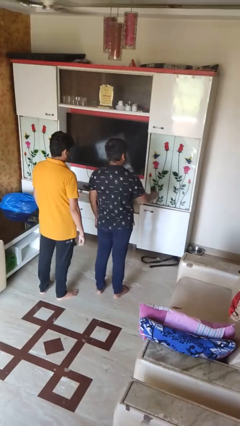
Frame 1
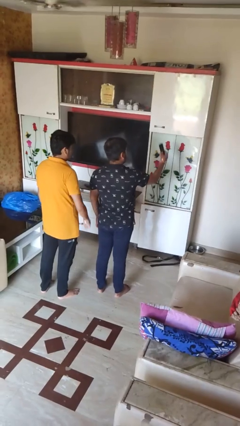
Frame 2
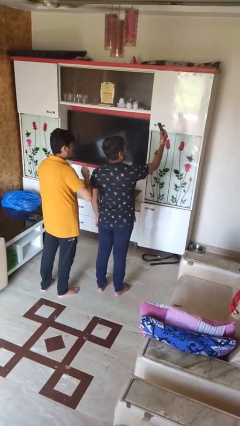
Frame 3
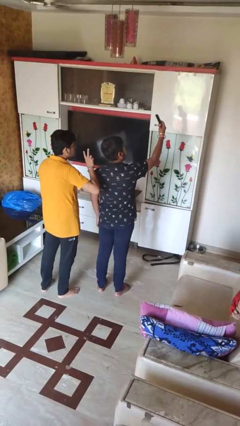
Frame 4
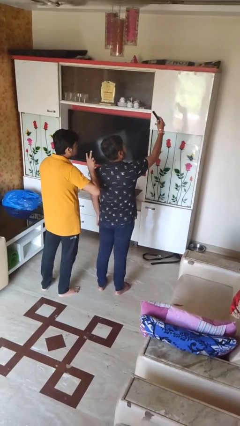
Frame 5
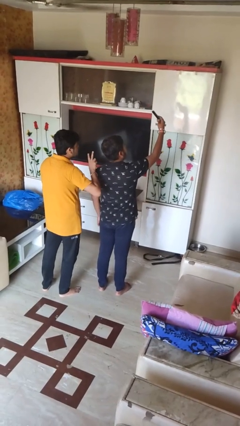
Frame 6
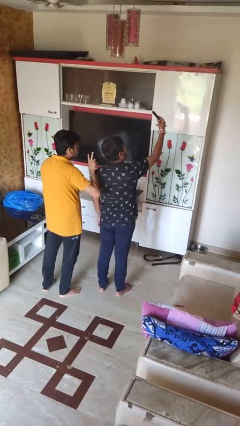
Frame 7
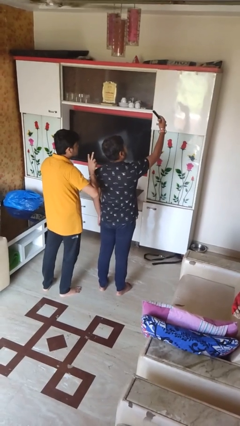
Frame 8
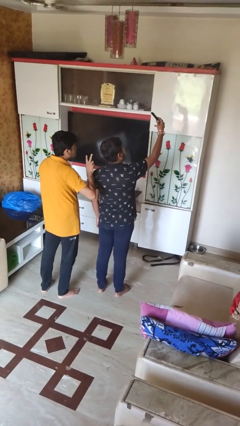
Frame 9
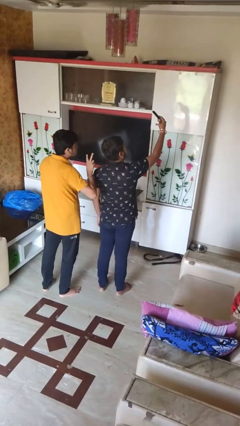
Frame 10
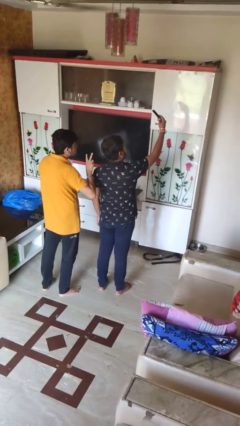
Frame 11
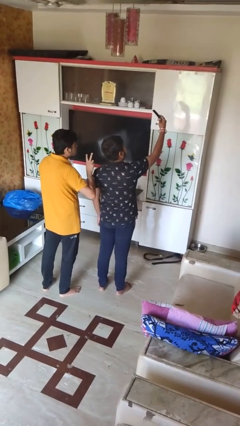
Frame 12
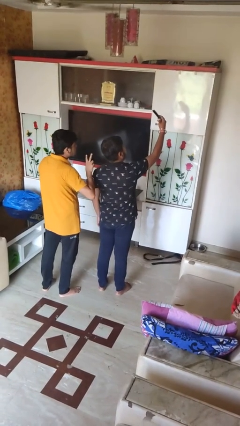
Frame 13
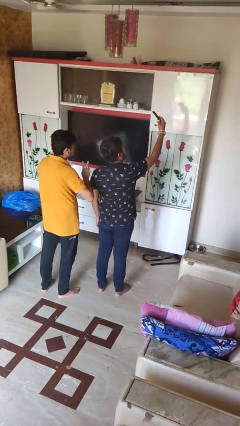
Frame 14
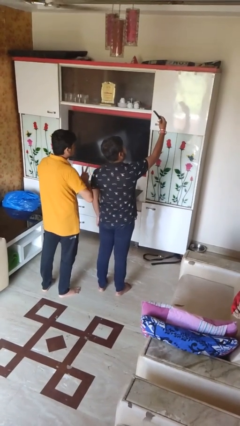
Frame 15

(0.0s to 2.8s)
person takes selfie with person

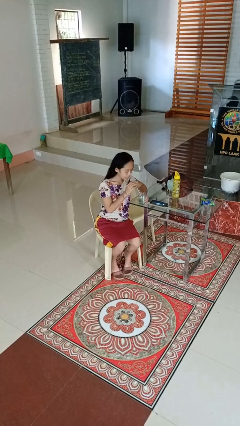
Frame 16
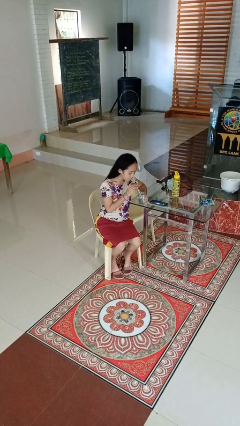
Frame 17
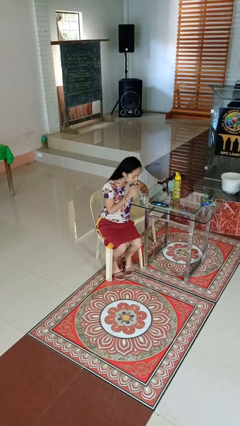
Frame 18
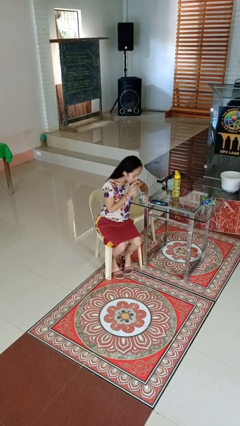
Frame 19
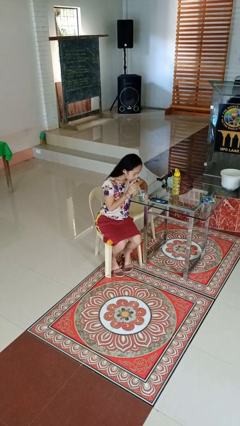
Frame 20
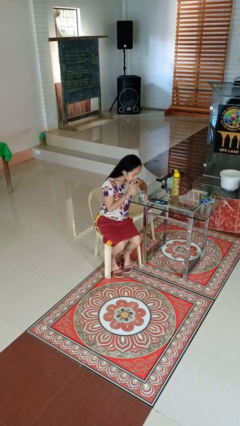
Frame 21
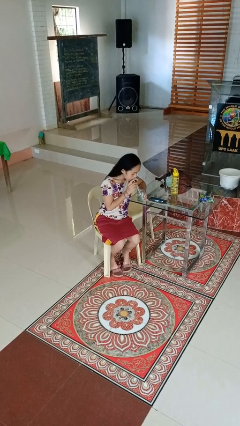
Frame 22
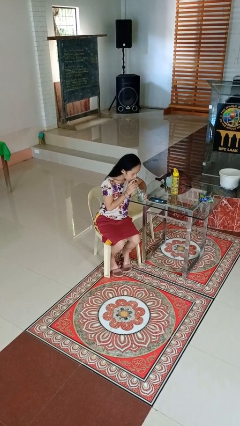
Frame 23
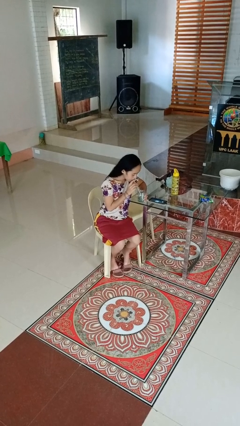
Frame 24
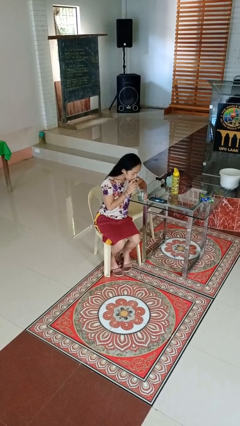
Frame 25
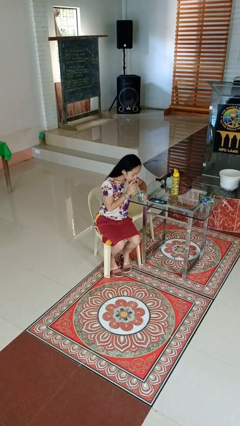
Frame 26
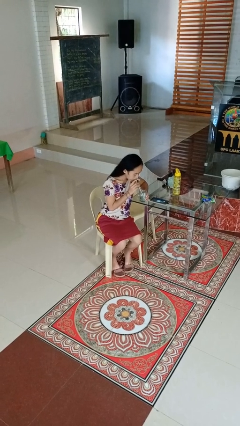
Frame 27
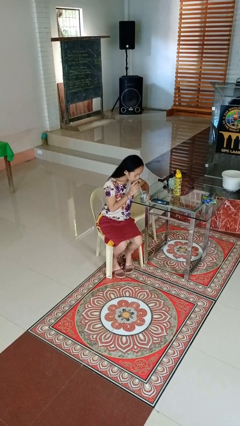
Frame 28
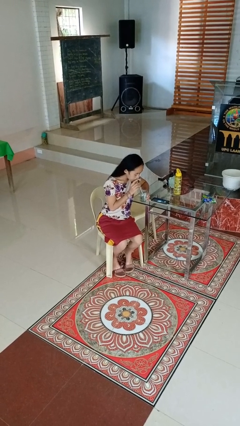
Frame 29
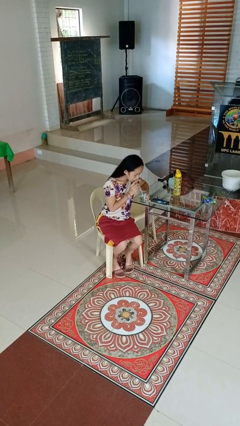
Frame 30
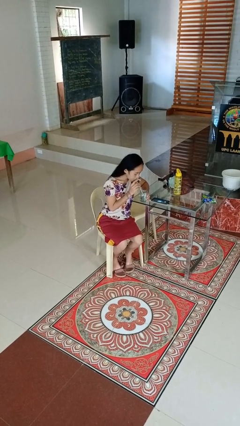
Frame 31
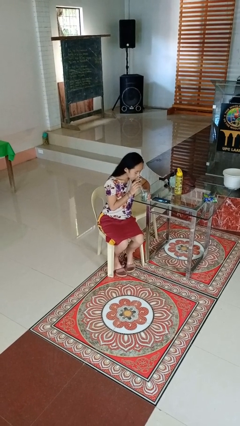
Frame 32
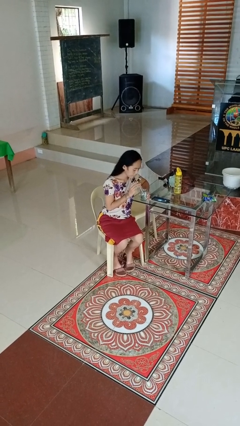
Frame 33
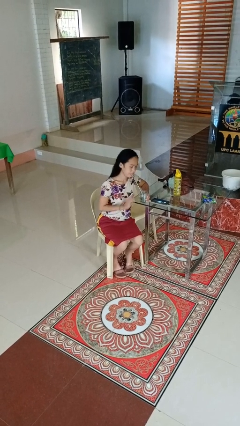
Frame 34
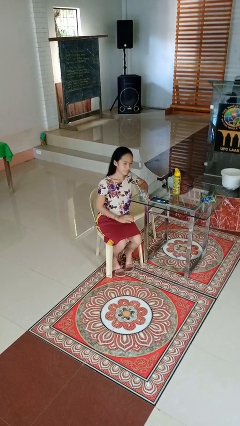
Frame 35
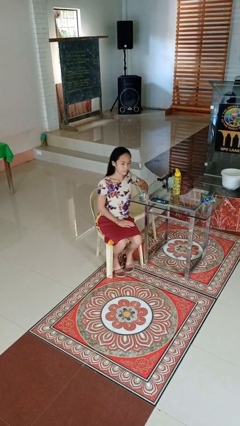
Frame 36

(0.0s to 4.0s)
person drinks from straw

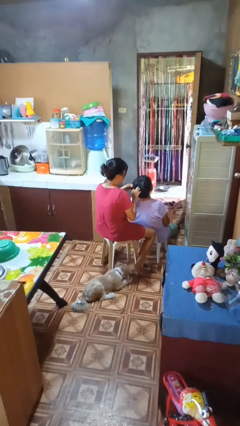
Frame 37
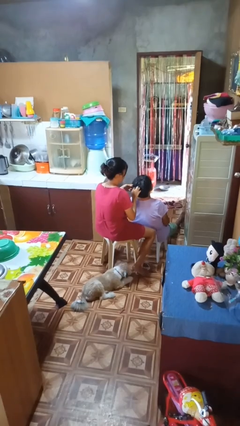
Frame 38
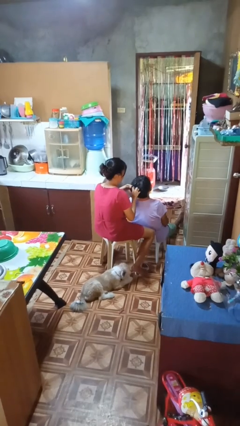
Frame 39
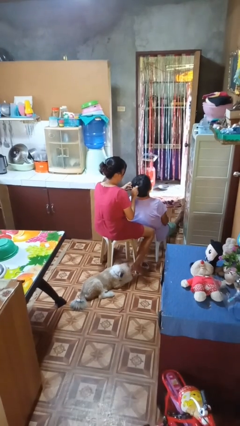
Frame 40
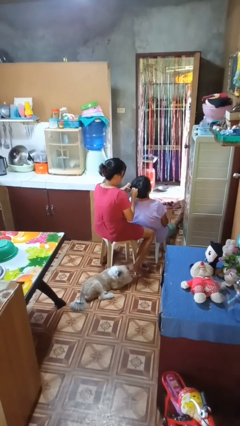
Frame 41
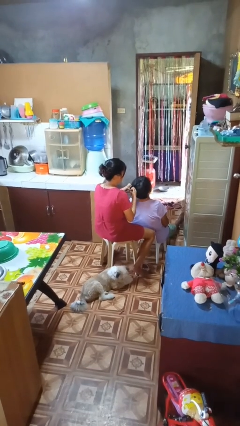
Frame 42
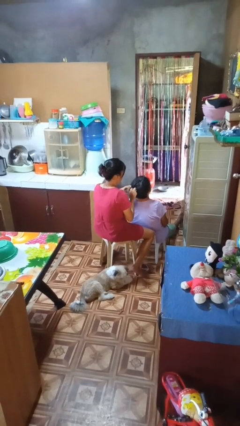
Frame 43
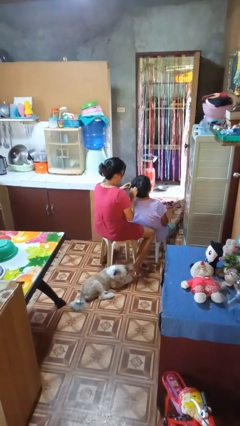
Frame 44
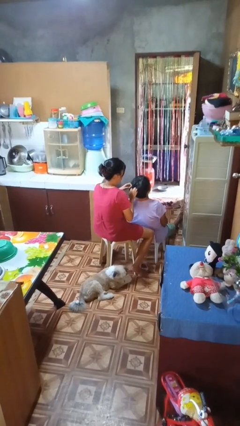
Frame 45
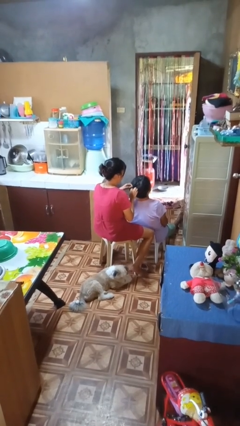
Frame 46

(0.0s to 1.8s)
person braids hair of person

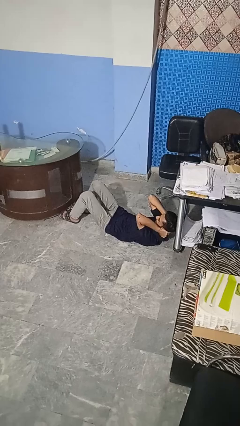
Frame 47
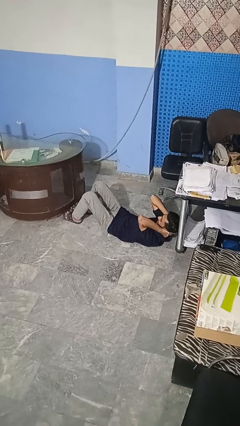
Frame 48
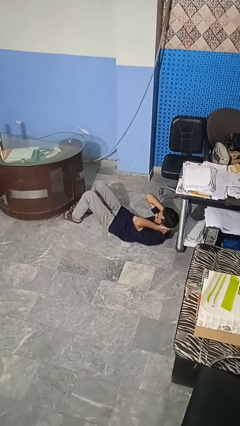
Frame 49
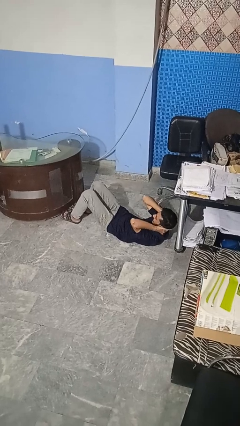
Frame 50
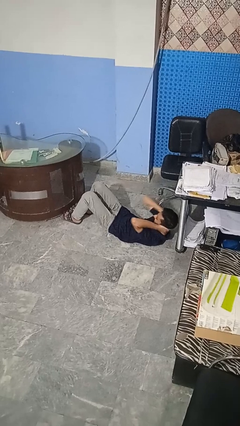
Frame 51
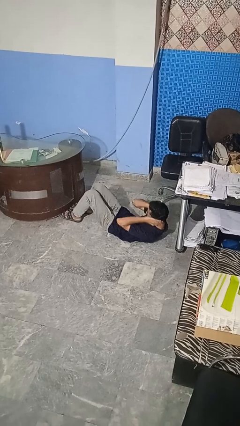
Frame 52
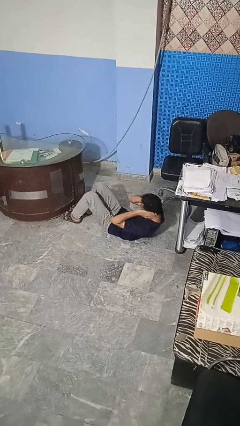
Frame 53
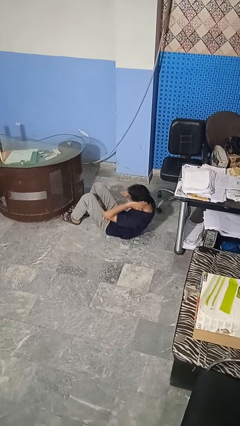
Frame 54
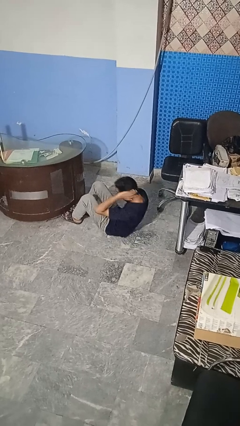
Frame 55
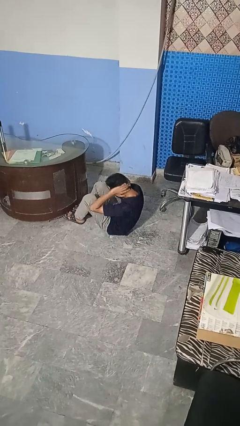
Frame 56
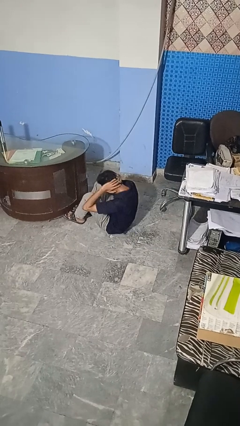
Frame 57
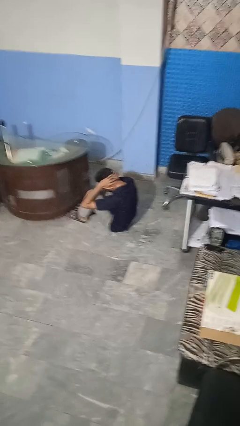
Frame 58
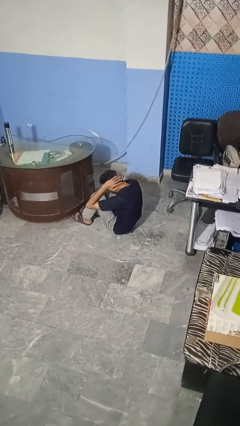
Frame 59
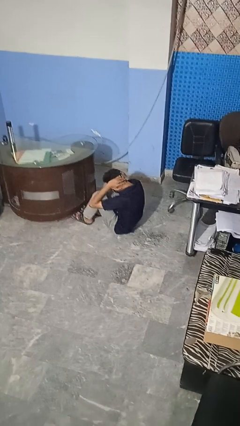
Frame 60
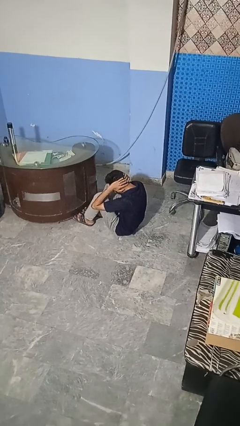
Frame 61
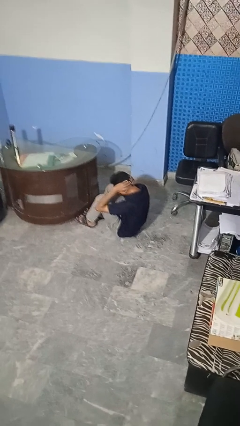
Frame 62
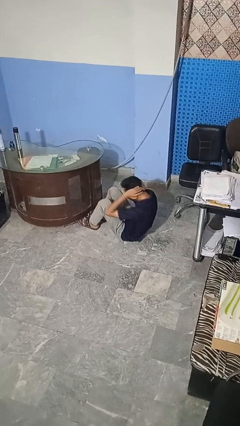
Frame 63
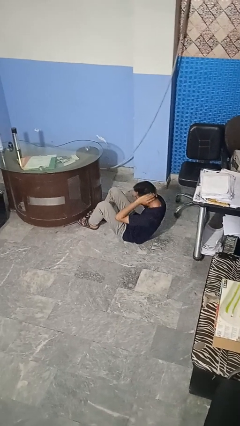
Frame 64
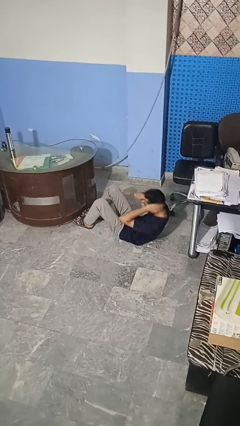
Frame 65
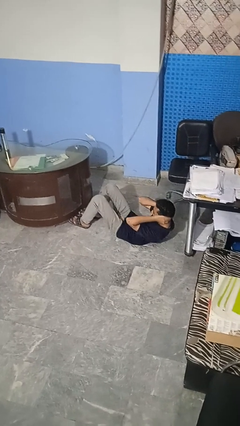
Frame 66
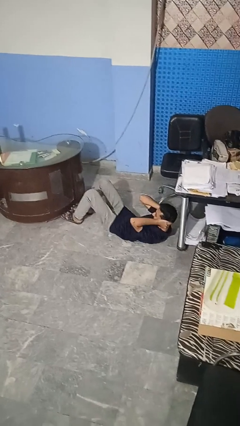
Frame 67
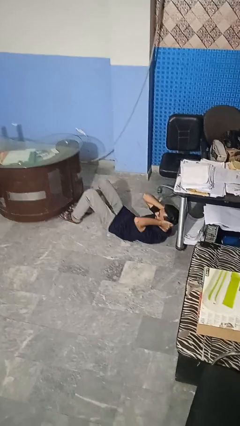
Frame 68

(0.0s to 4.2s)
person exercises with situp

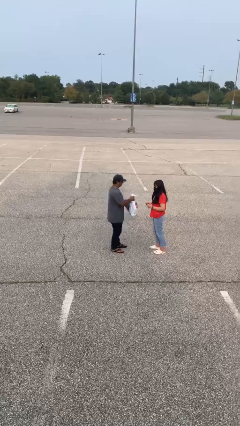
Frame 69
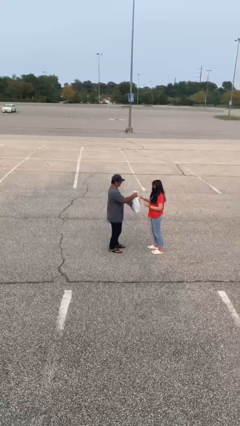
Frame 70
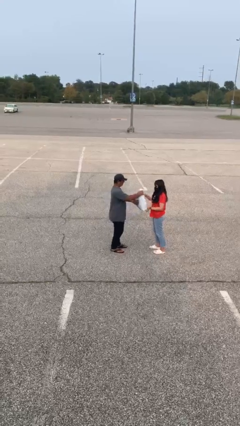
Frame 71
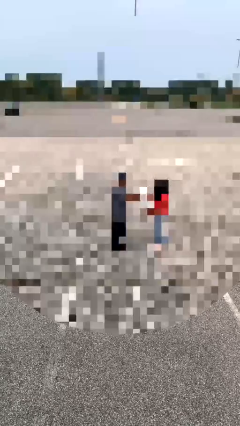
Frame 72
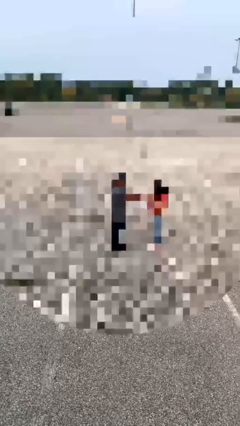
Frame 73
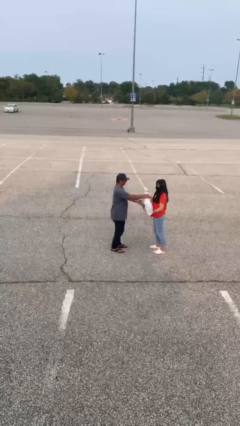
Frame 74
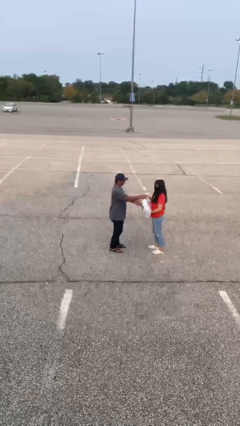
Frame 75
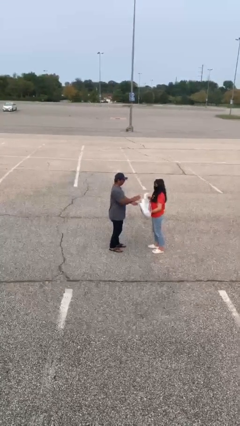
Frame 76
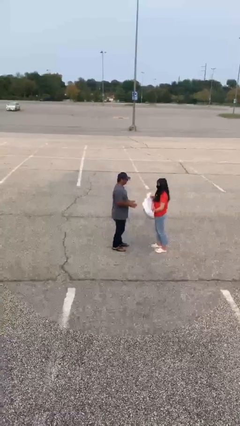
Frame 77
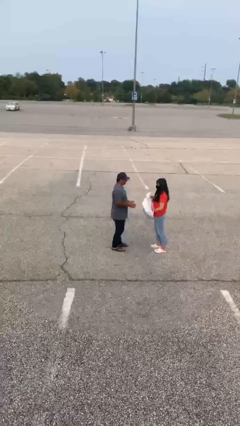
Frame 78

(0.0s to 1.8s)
person transfers object to person

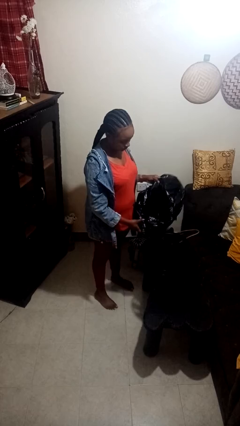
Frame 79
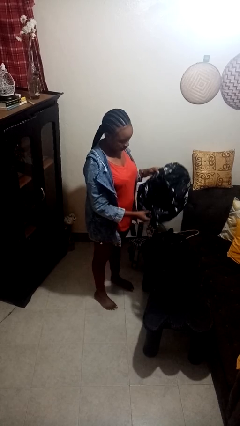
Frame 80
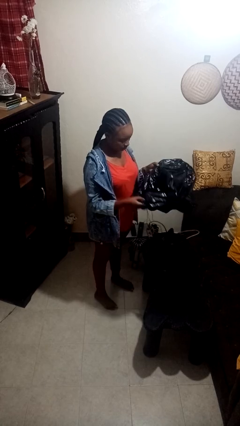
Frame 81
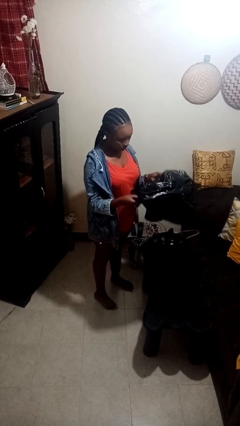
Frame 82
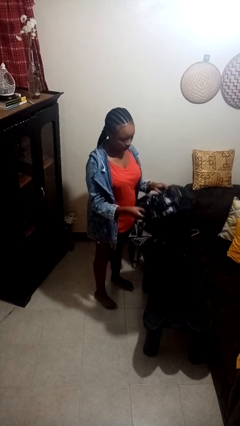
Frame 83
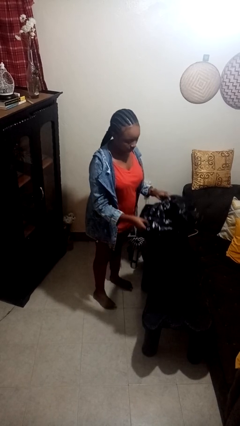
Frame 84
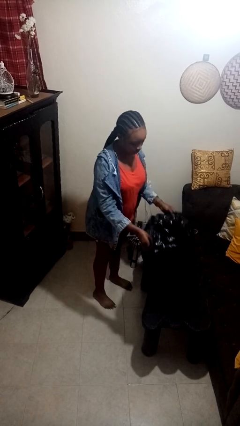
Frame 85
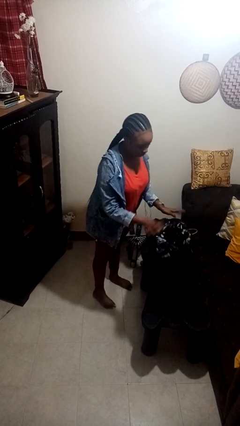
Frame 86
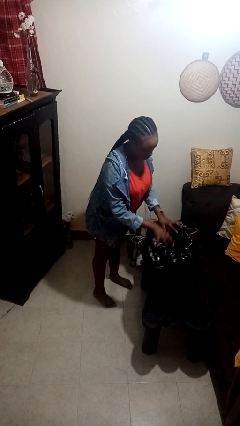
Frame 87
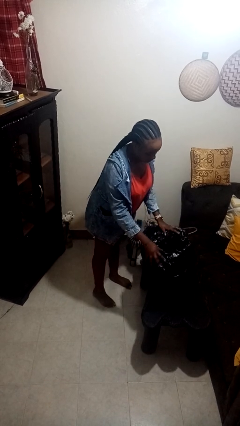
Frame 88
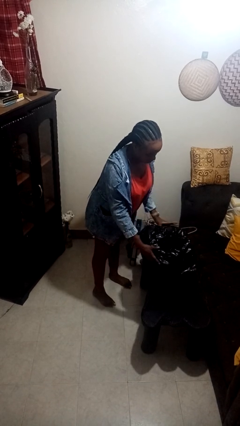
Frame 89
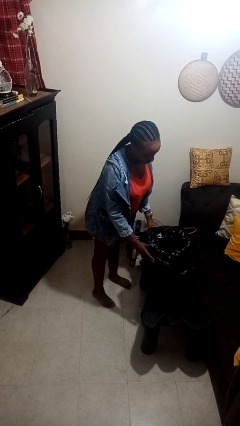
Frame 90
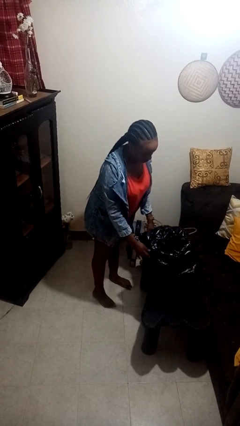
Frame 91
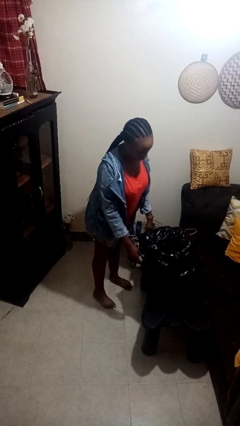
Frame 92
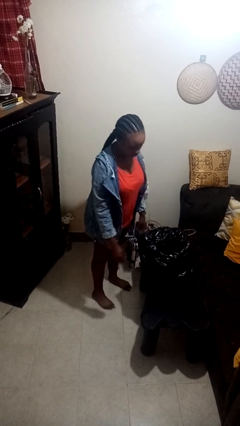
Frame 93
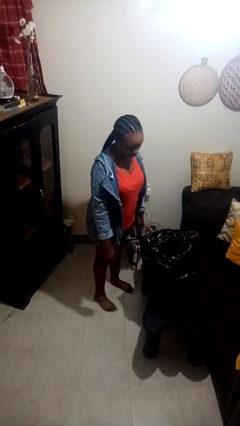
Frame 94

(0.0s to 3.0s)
person inserts trashbag into trashcan

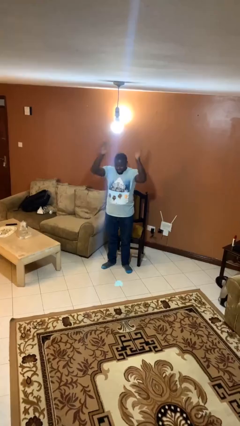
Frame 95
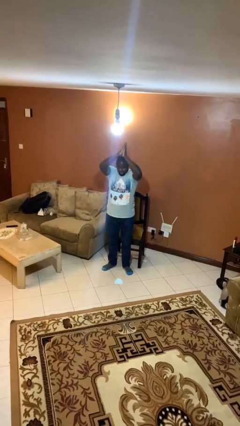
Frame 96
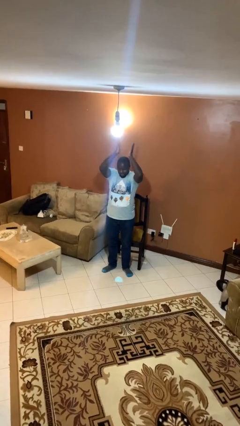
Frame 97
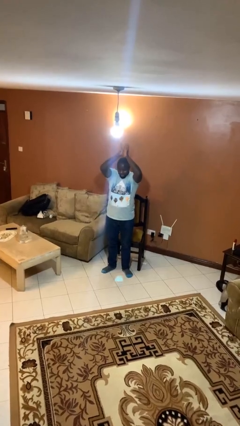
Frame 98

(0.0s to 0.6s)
person claps hands
